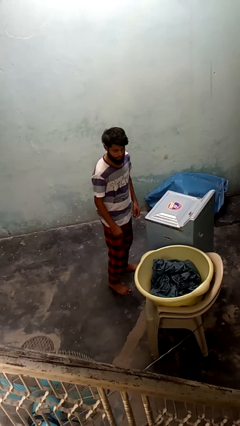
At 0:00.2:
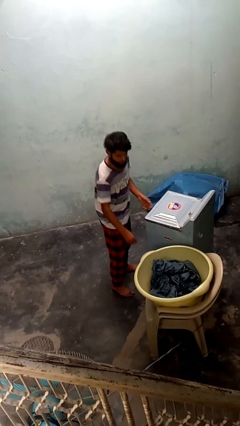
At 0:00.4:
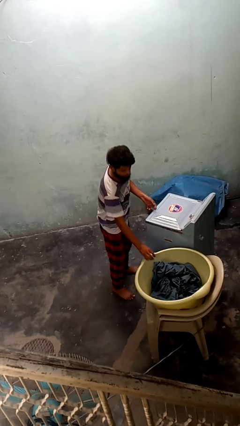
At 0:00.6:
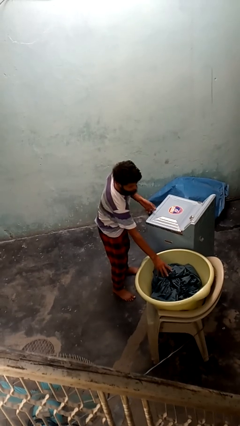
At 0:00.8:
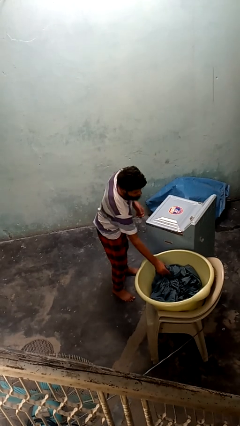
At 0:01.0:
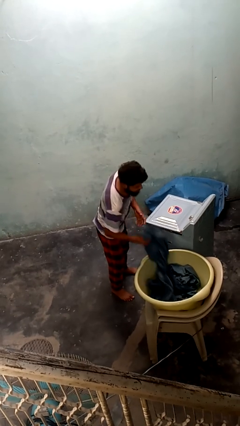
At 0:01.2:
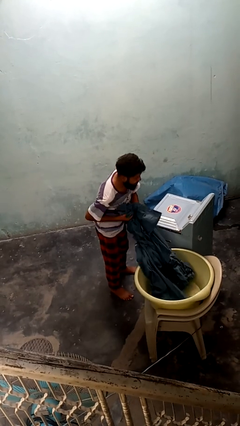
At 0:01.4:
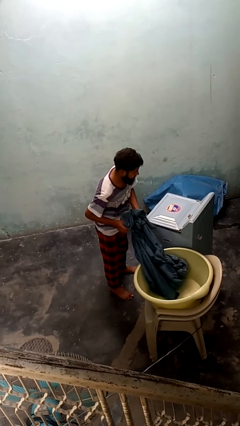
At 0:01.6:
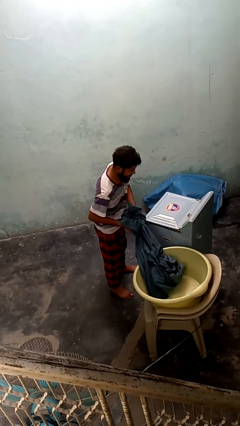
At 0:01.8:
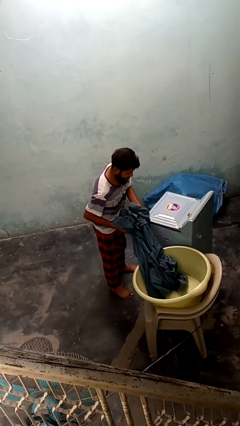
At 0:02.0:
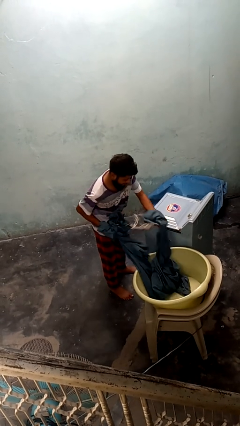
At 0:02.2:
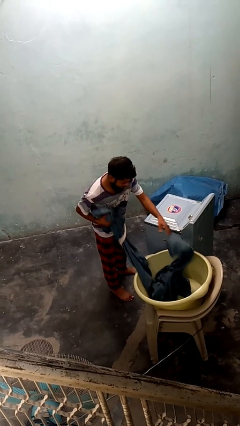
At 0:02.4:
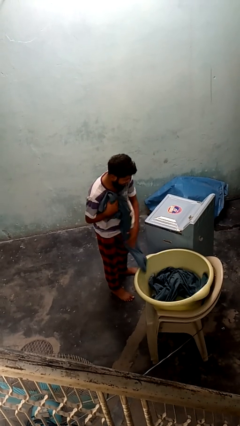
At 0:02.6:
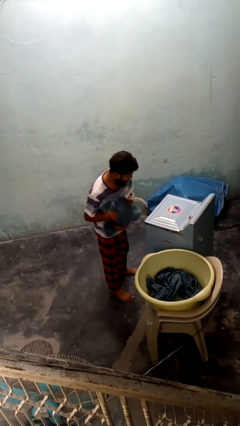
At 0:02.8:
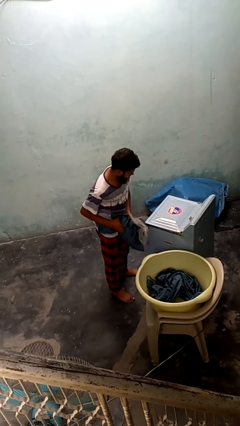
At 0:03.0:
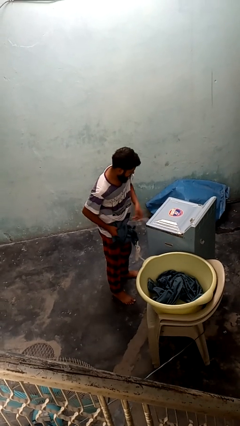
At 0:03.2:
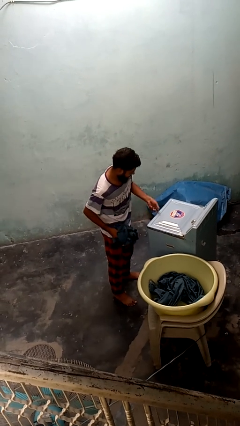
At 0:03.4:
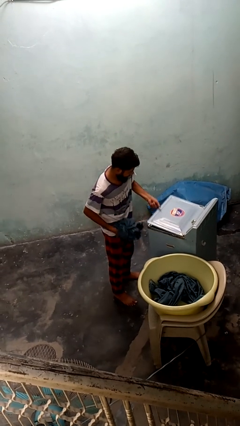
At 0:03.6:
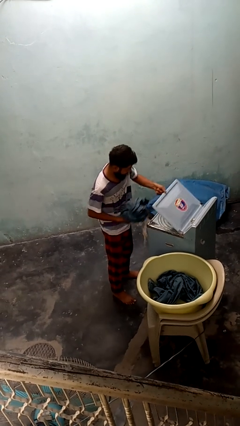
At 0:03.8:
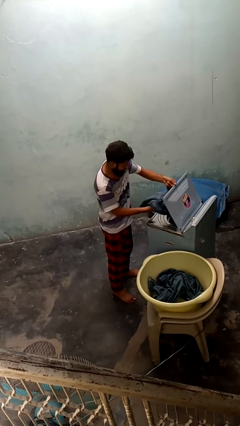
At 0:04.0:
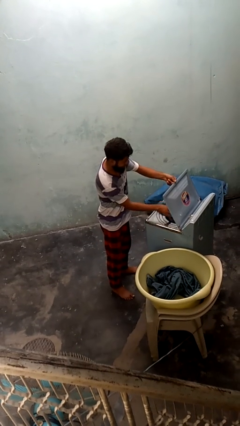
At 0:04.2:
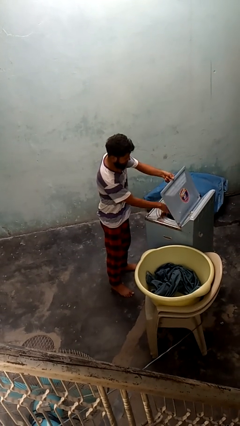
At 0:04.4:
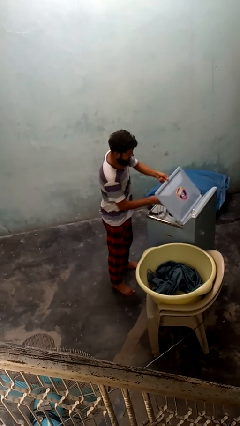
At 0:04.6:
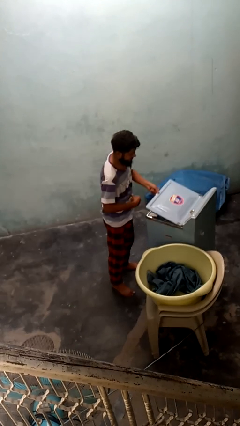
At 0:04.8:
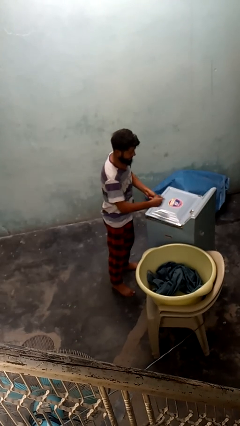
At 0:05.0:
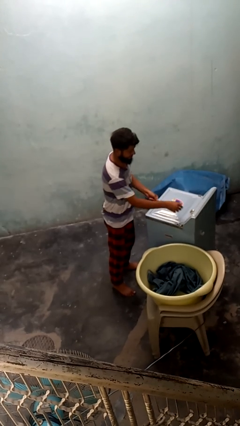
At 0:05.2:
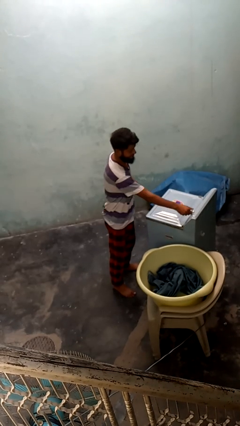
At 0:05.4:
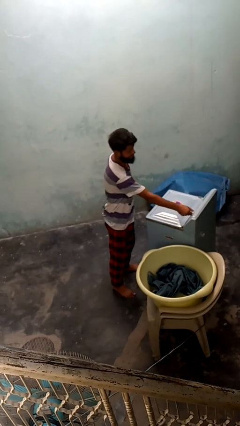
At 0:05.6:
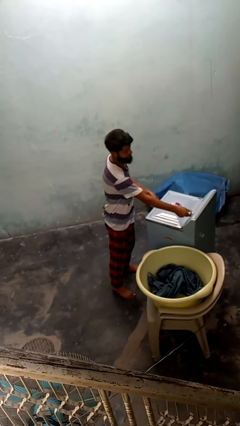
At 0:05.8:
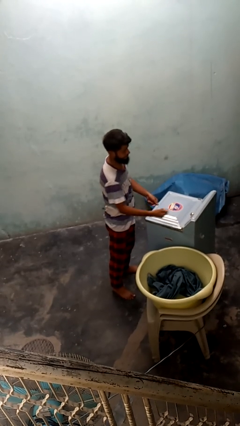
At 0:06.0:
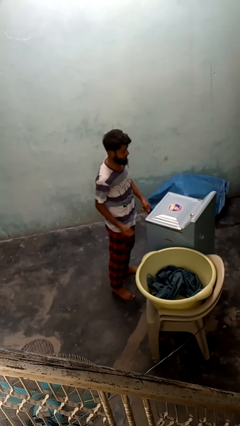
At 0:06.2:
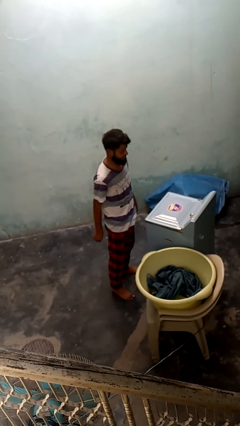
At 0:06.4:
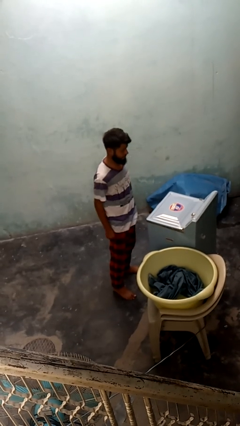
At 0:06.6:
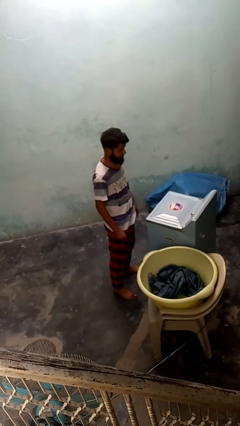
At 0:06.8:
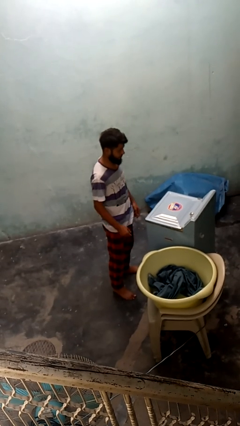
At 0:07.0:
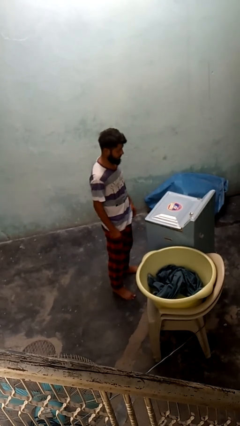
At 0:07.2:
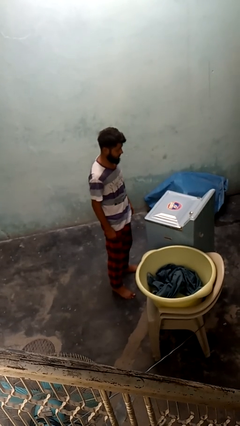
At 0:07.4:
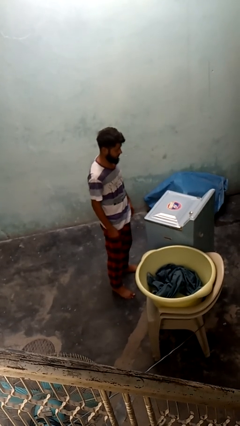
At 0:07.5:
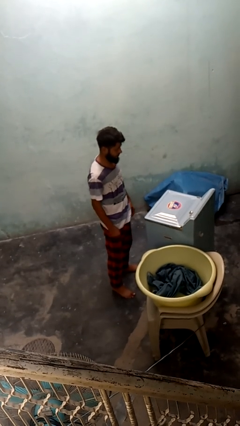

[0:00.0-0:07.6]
person loads dryer

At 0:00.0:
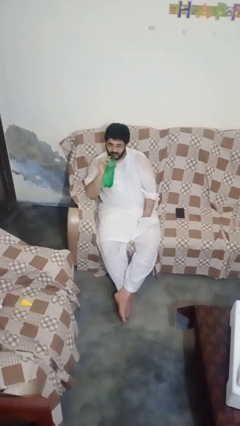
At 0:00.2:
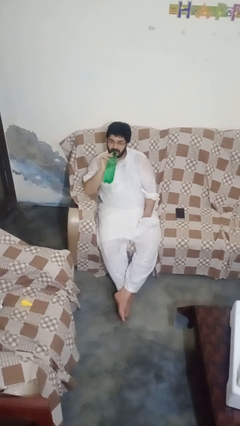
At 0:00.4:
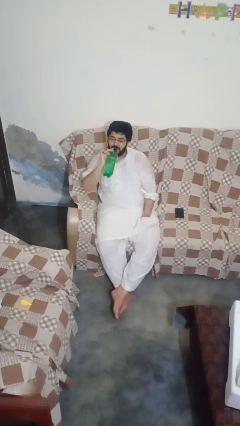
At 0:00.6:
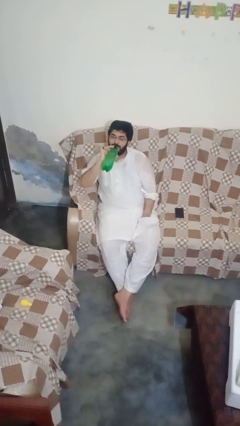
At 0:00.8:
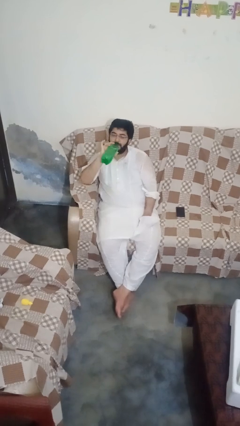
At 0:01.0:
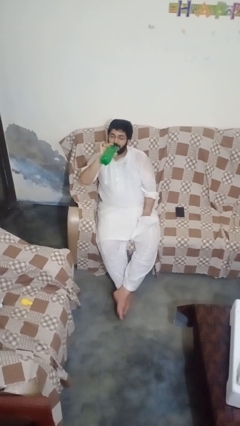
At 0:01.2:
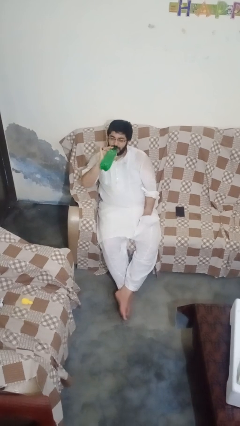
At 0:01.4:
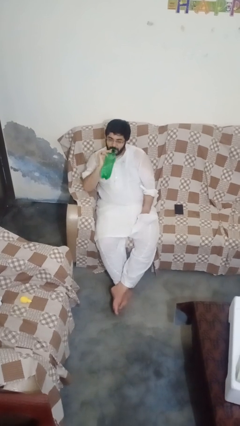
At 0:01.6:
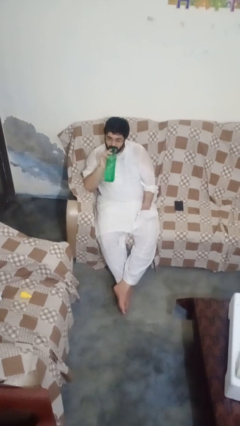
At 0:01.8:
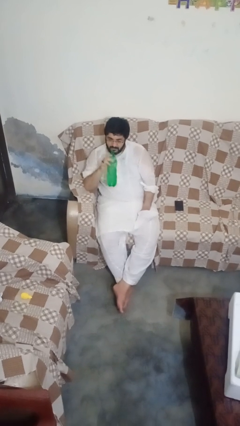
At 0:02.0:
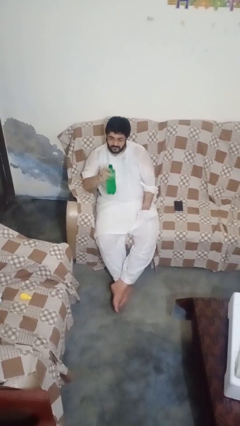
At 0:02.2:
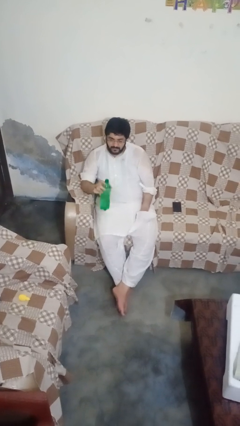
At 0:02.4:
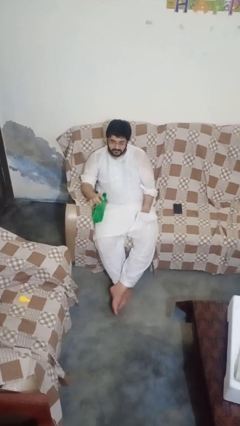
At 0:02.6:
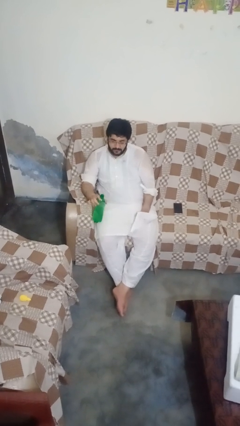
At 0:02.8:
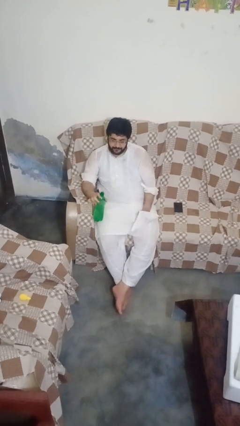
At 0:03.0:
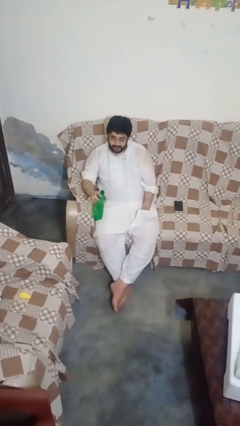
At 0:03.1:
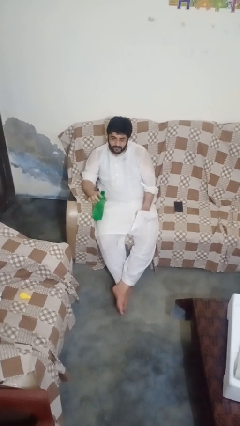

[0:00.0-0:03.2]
person drinks from bottle

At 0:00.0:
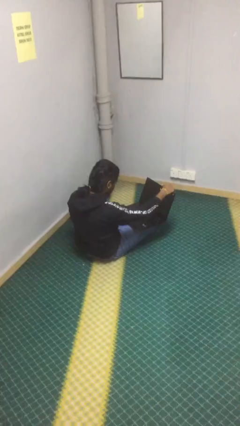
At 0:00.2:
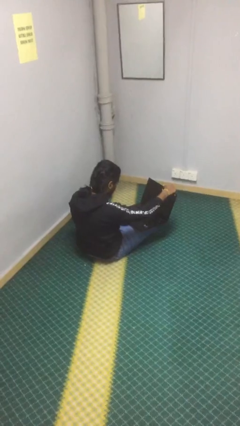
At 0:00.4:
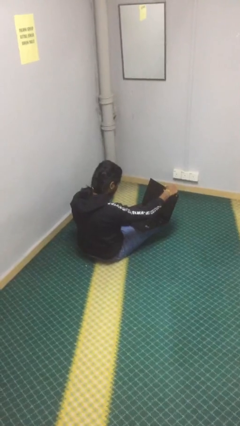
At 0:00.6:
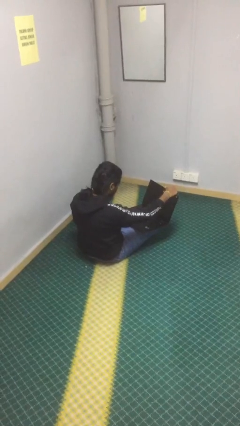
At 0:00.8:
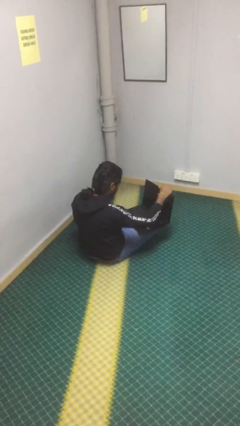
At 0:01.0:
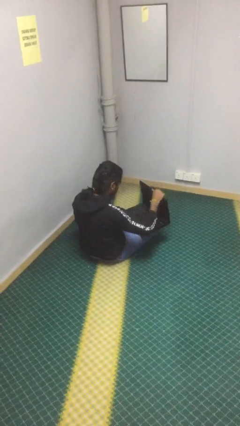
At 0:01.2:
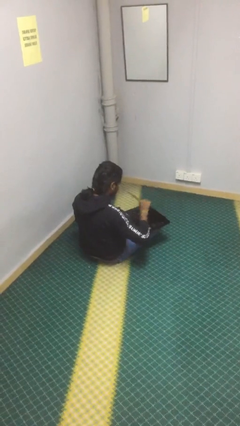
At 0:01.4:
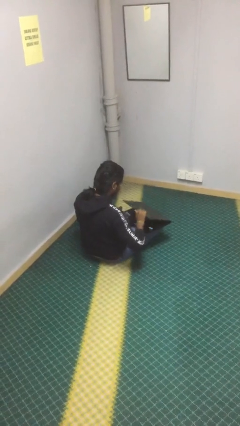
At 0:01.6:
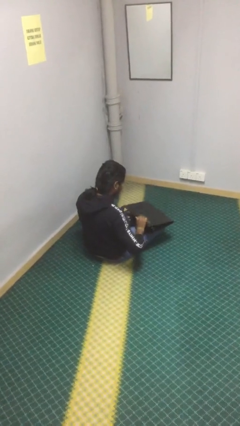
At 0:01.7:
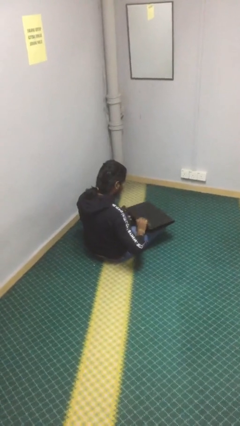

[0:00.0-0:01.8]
person closes laptop

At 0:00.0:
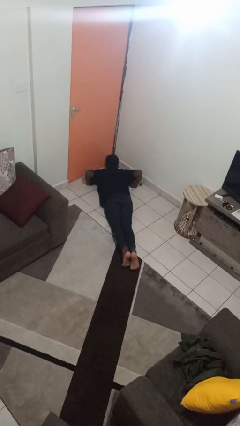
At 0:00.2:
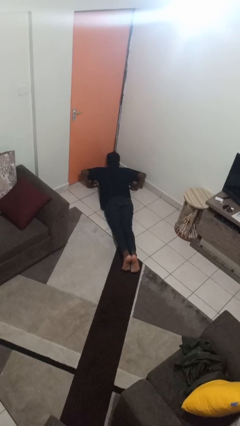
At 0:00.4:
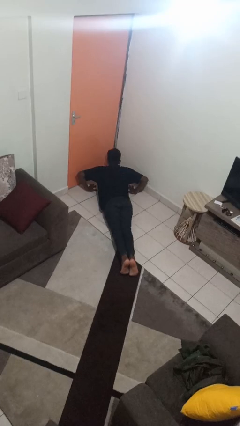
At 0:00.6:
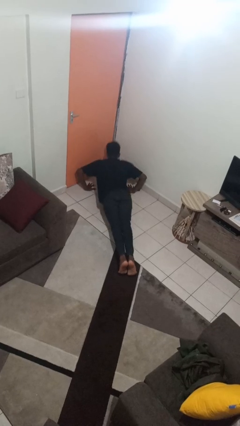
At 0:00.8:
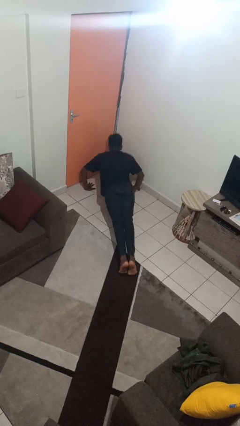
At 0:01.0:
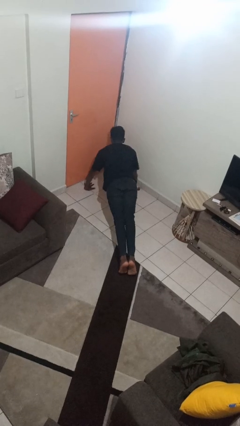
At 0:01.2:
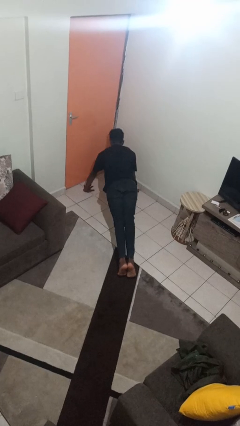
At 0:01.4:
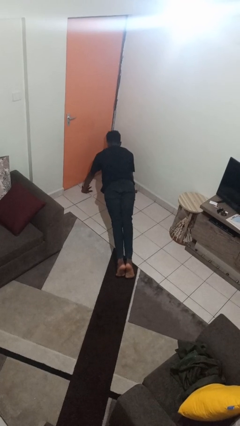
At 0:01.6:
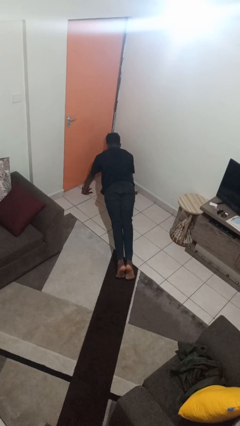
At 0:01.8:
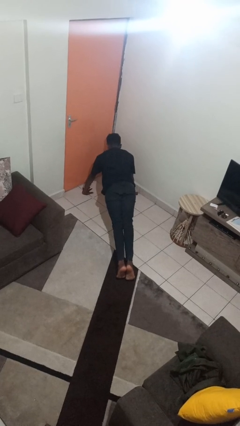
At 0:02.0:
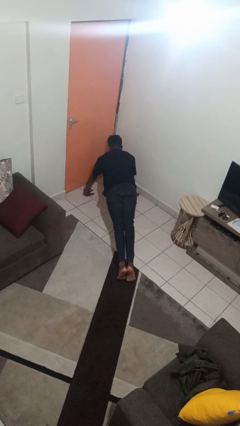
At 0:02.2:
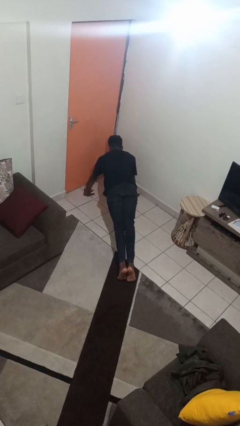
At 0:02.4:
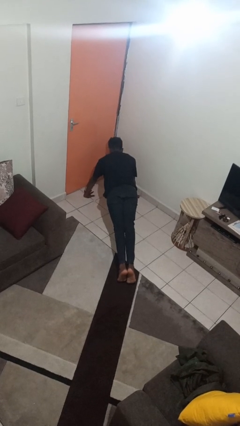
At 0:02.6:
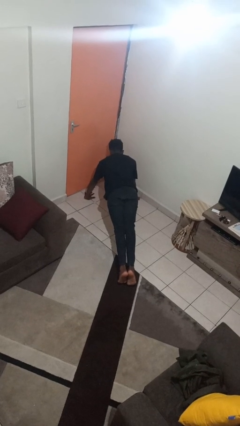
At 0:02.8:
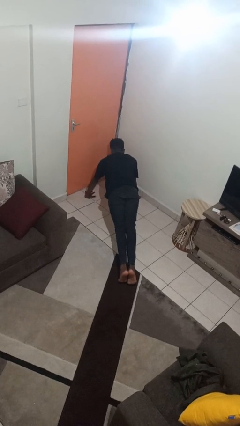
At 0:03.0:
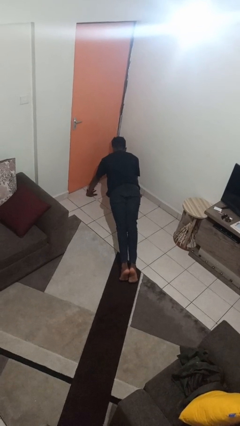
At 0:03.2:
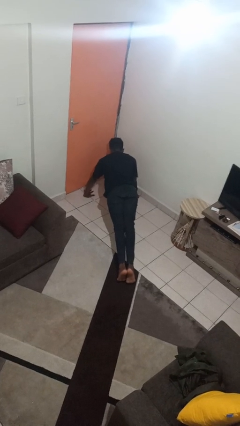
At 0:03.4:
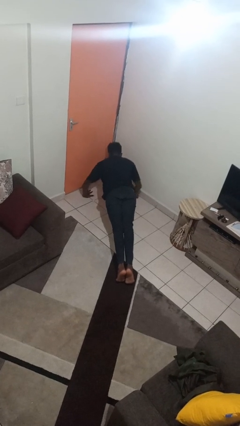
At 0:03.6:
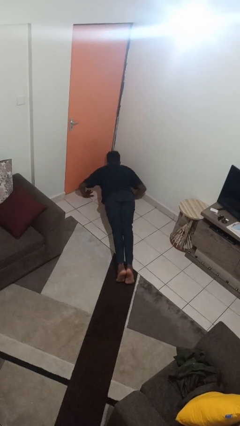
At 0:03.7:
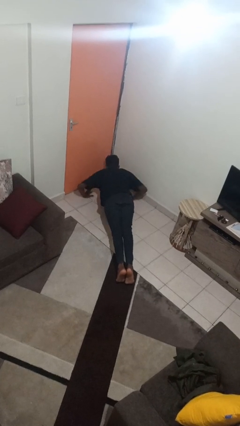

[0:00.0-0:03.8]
person exercises with pushup

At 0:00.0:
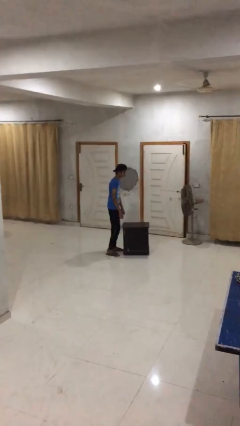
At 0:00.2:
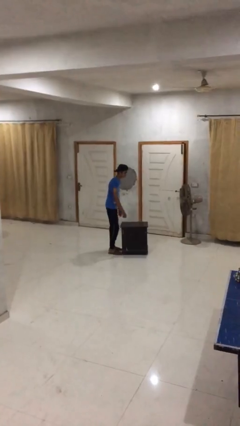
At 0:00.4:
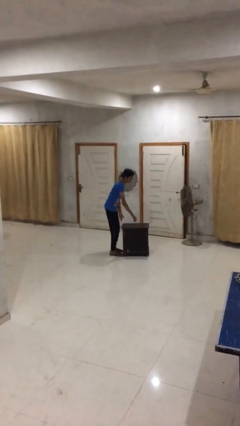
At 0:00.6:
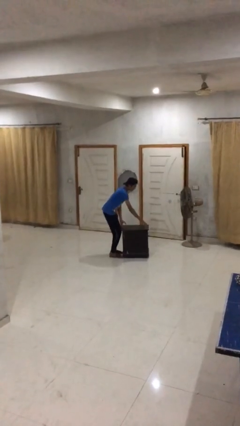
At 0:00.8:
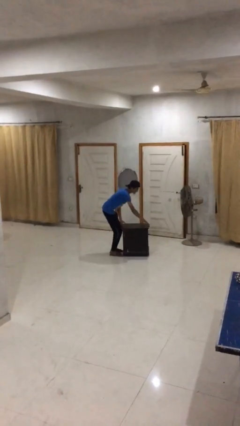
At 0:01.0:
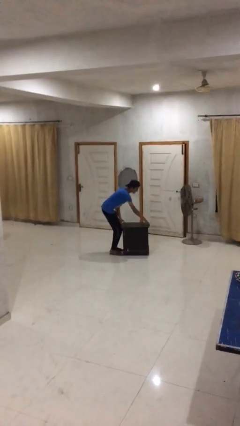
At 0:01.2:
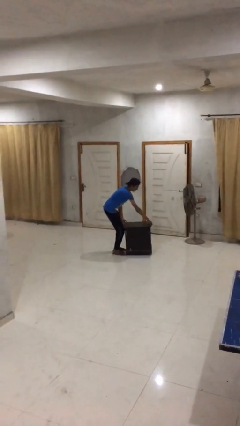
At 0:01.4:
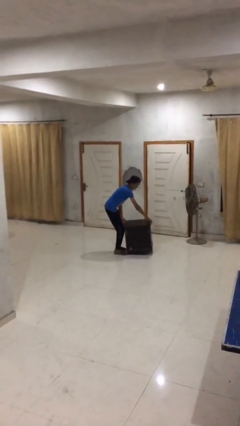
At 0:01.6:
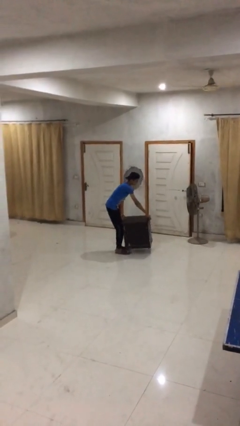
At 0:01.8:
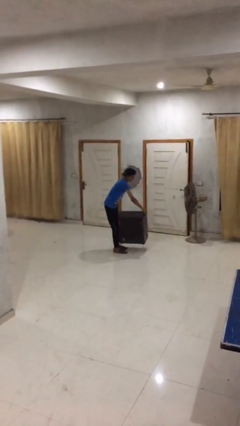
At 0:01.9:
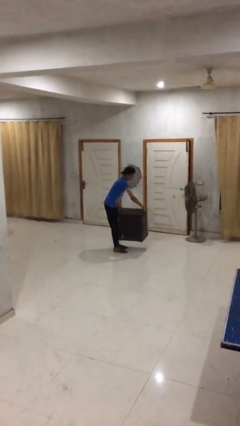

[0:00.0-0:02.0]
person picks up object from floor
